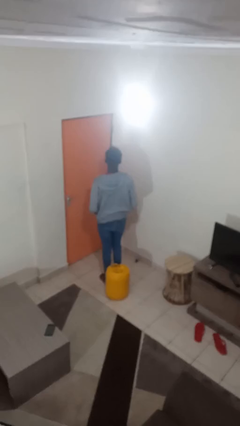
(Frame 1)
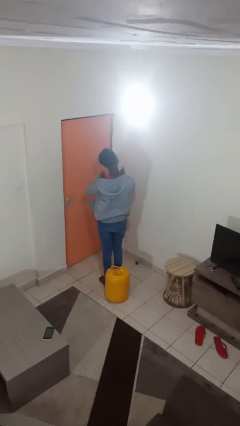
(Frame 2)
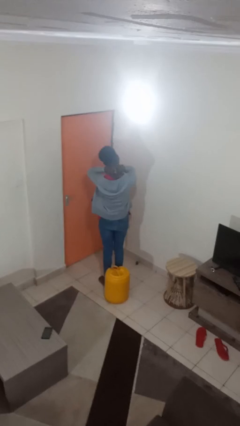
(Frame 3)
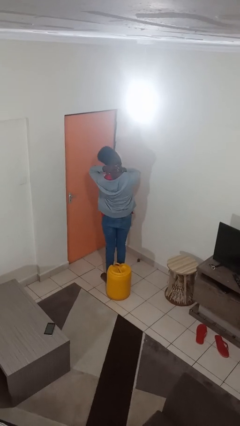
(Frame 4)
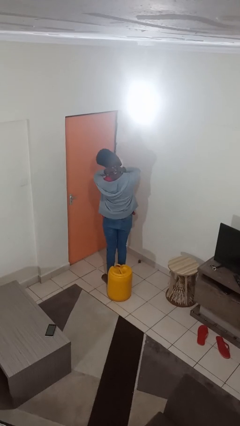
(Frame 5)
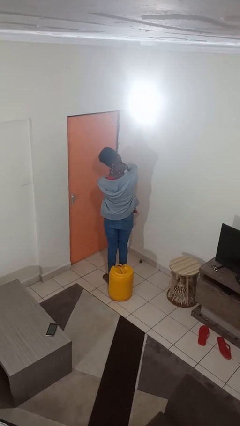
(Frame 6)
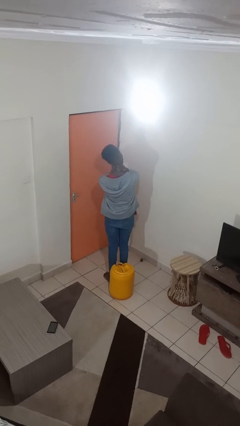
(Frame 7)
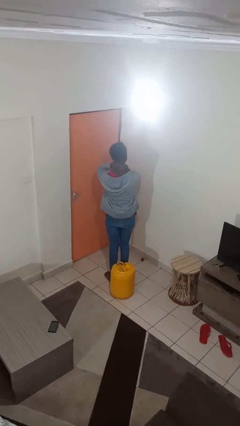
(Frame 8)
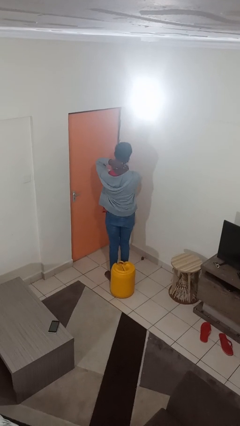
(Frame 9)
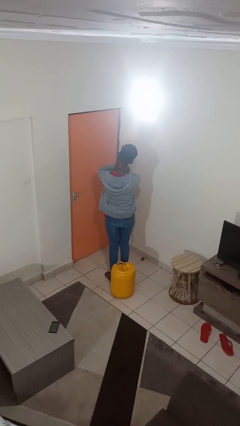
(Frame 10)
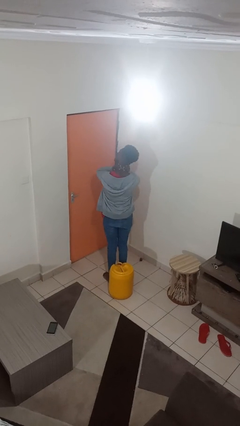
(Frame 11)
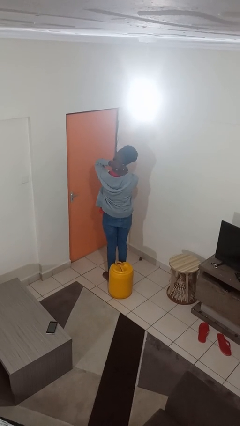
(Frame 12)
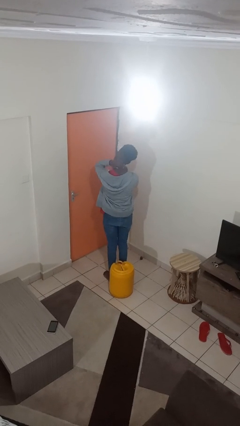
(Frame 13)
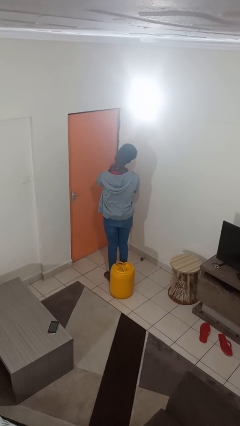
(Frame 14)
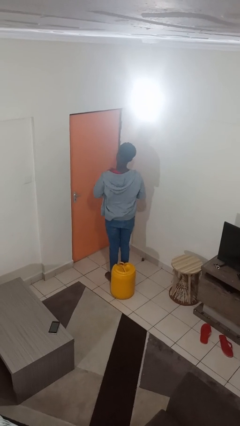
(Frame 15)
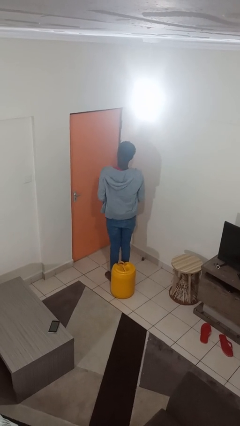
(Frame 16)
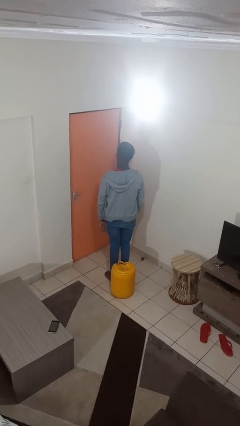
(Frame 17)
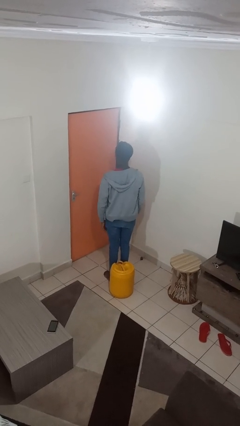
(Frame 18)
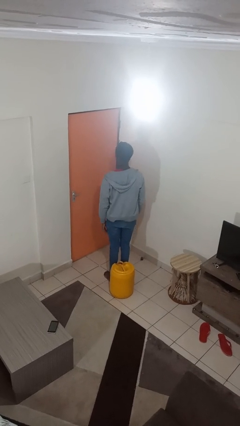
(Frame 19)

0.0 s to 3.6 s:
person rubs neck

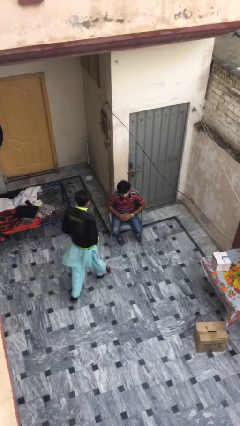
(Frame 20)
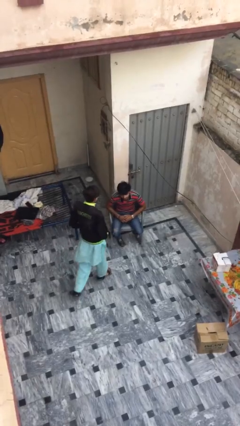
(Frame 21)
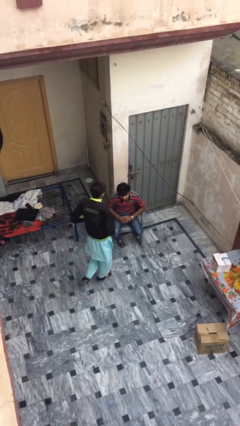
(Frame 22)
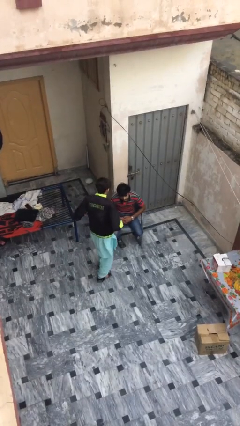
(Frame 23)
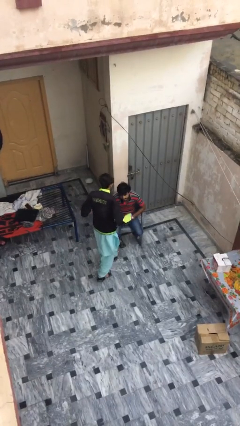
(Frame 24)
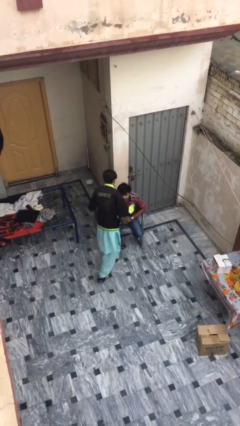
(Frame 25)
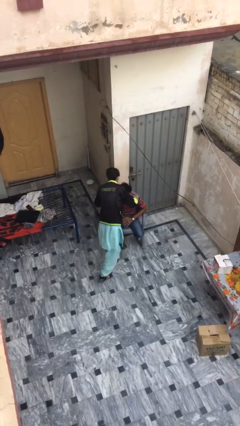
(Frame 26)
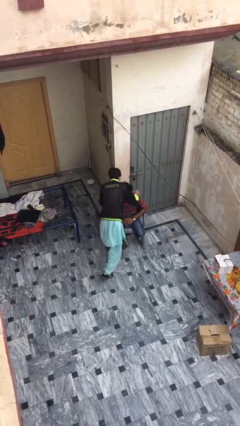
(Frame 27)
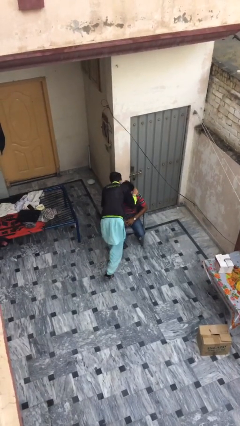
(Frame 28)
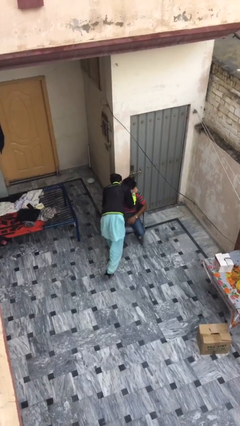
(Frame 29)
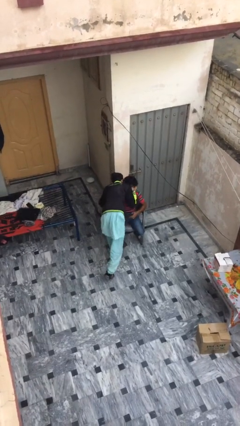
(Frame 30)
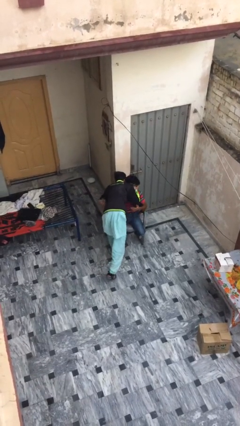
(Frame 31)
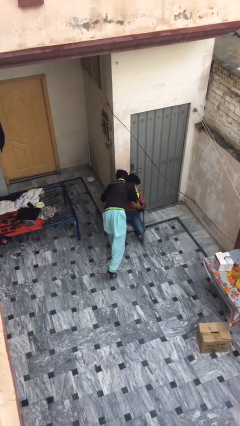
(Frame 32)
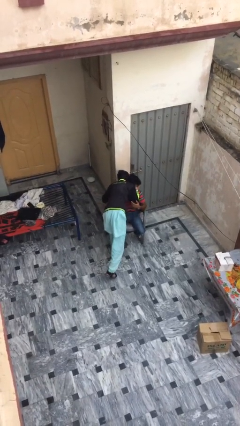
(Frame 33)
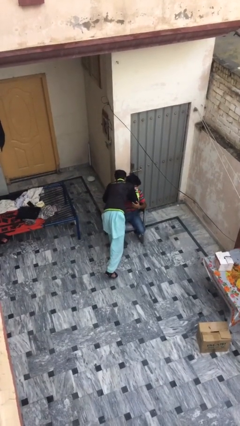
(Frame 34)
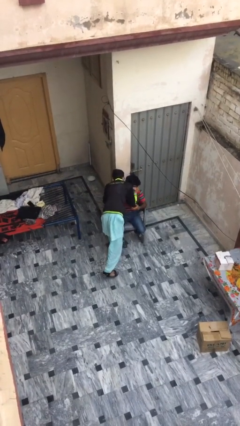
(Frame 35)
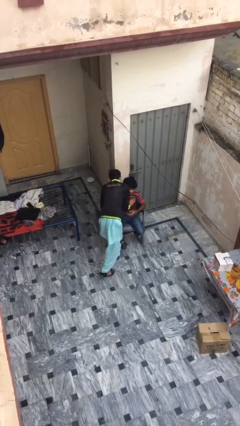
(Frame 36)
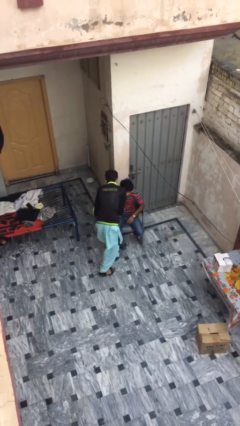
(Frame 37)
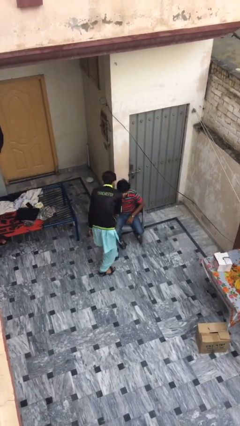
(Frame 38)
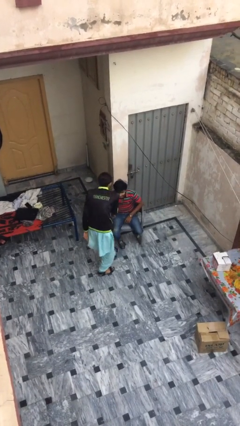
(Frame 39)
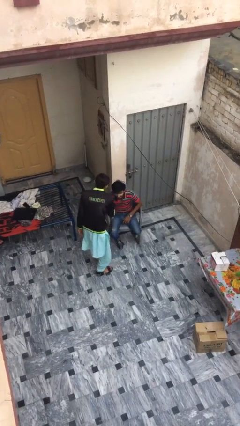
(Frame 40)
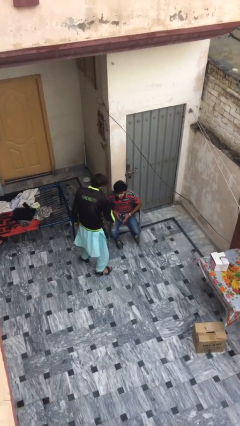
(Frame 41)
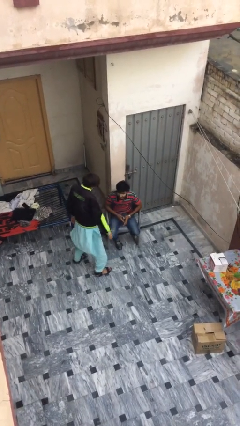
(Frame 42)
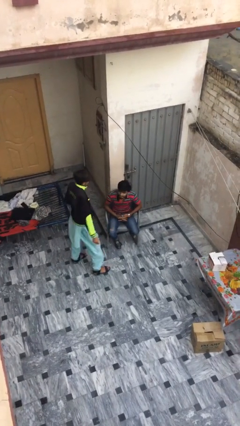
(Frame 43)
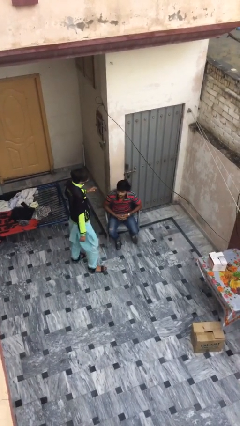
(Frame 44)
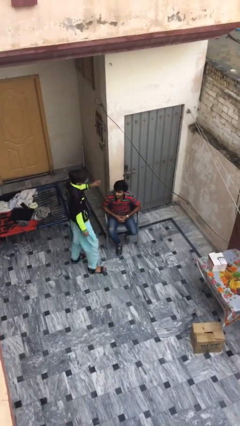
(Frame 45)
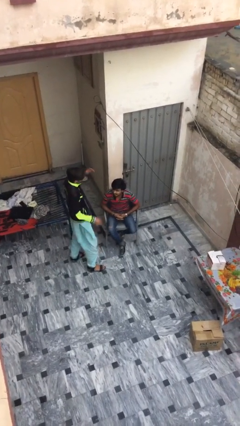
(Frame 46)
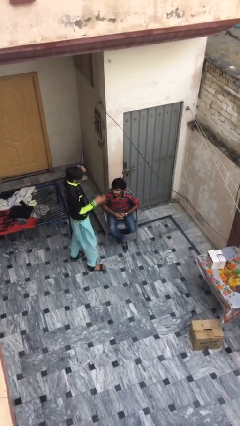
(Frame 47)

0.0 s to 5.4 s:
person embraces person

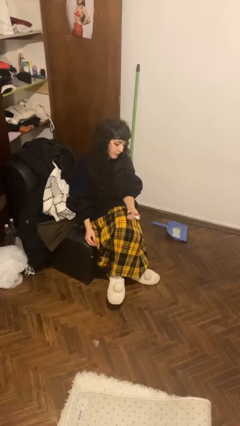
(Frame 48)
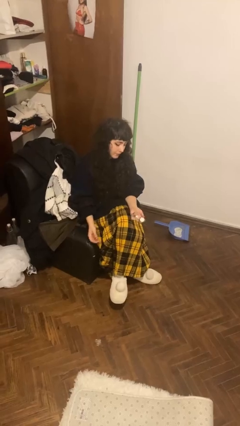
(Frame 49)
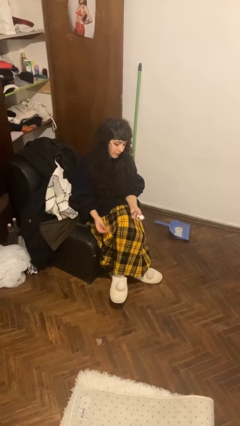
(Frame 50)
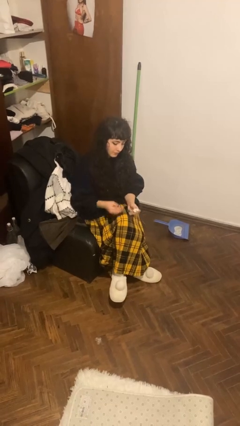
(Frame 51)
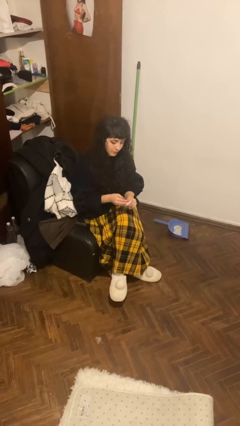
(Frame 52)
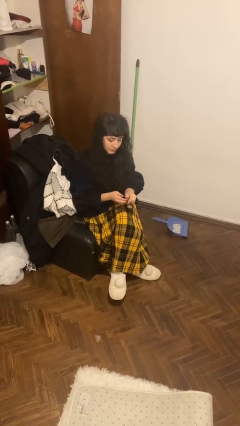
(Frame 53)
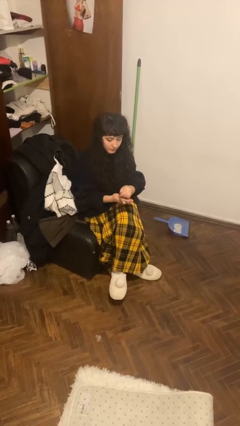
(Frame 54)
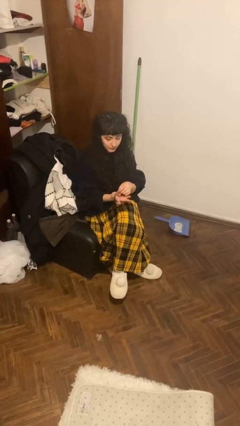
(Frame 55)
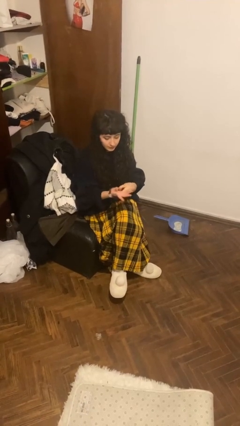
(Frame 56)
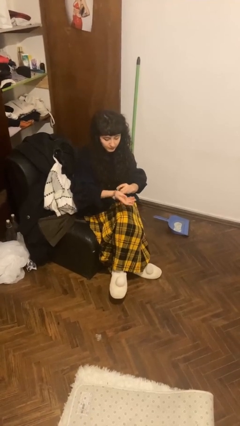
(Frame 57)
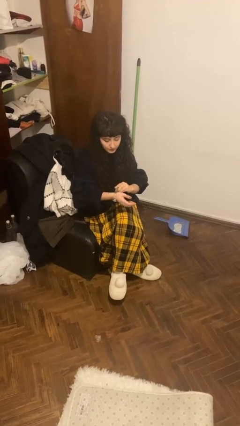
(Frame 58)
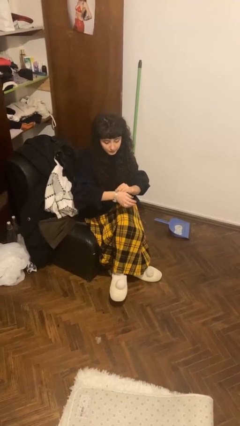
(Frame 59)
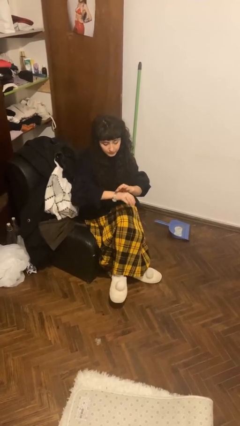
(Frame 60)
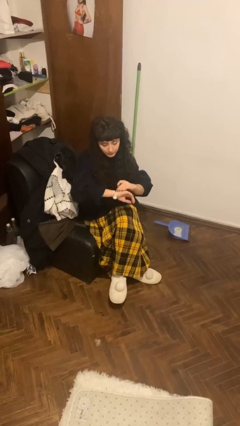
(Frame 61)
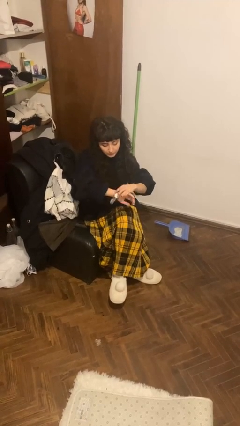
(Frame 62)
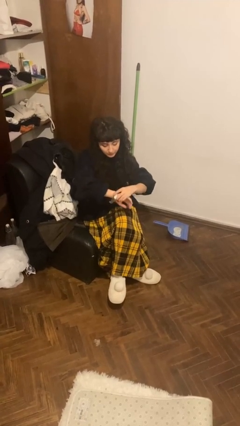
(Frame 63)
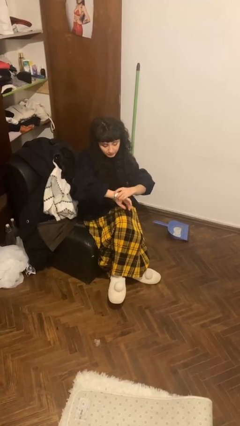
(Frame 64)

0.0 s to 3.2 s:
person puts on wristwatch

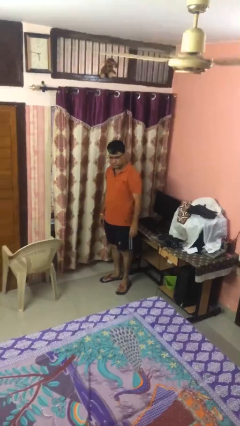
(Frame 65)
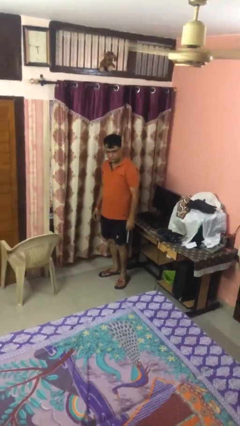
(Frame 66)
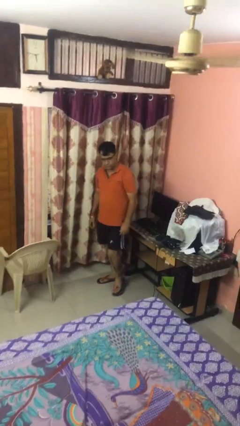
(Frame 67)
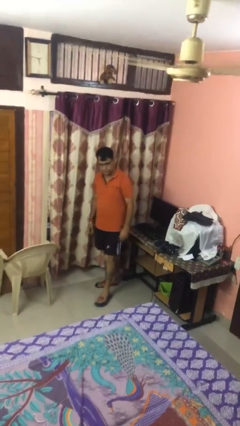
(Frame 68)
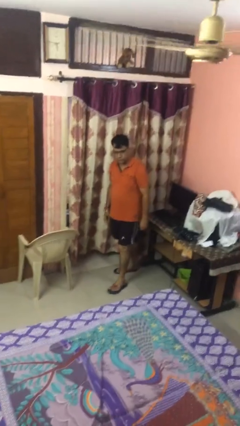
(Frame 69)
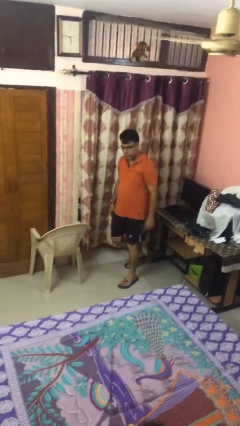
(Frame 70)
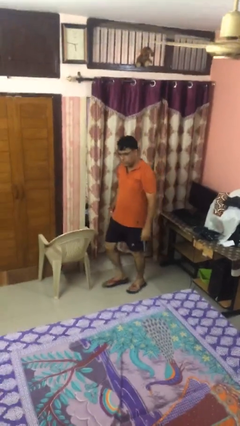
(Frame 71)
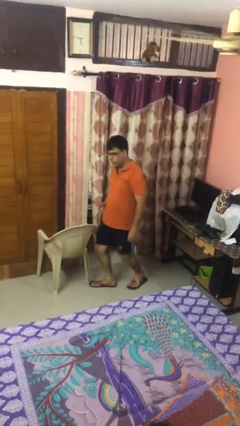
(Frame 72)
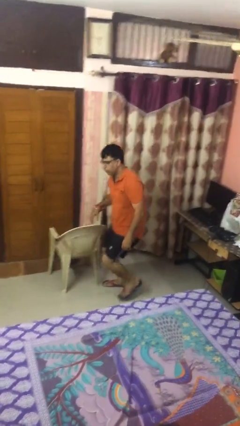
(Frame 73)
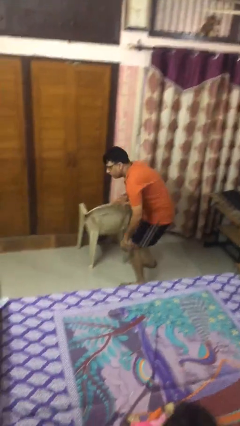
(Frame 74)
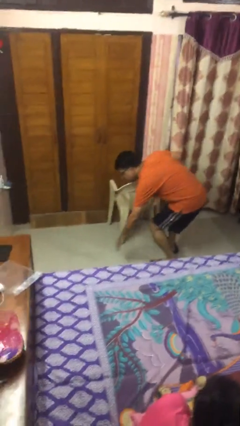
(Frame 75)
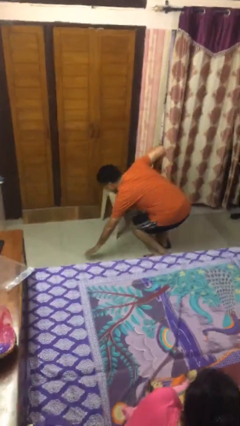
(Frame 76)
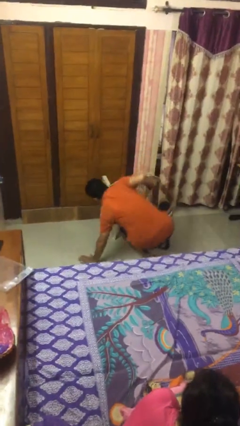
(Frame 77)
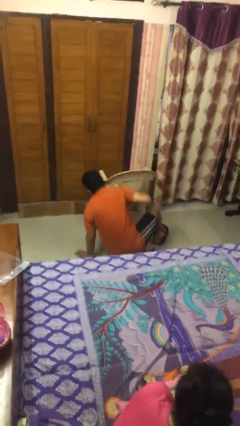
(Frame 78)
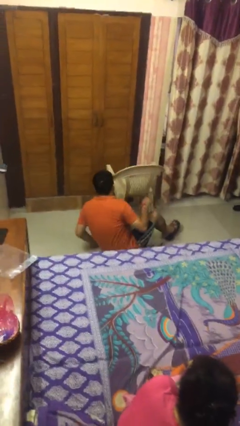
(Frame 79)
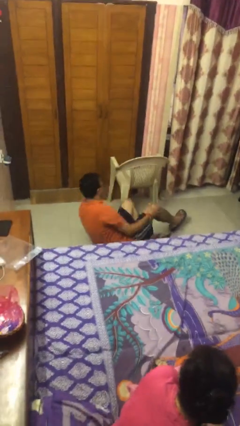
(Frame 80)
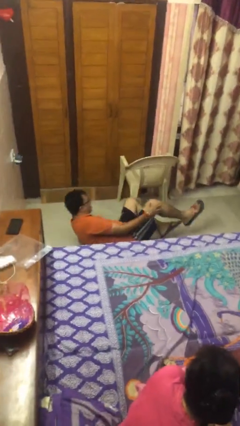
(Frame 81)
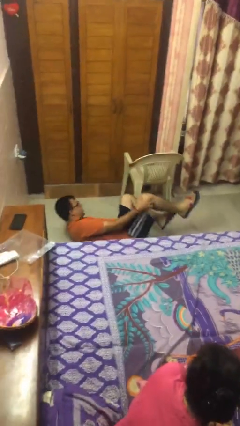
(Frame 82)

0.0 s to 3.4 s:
person trips on object on floor

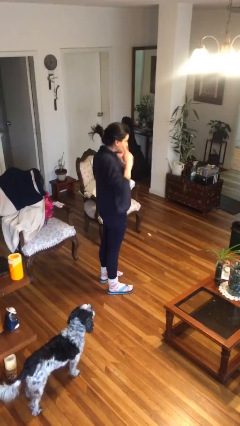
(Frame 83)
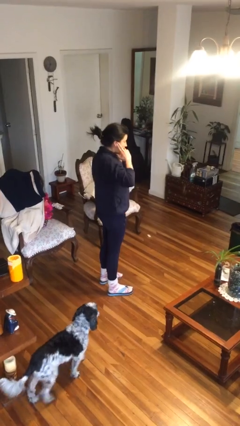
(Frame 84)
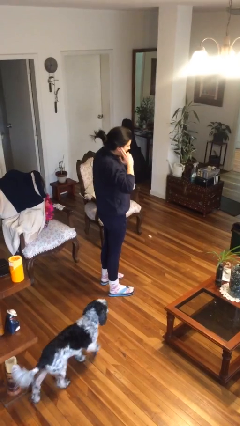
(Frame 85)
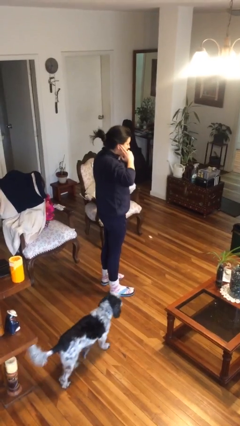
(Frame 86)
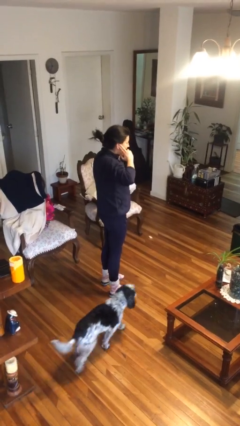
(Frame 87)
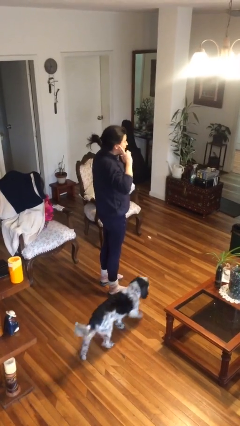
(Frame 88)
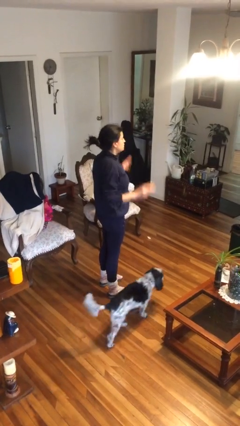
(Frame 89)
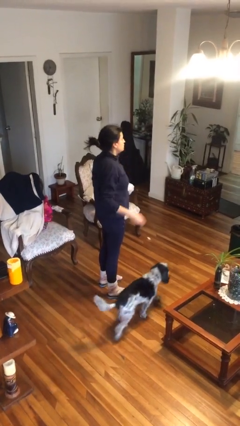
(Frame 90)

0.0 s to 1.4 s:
person puts fingers in ear

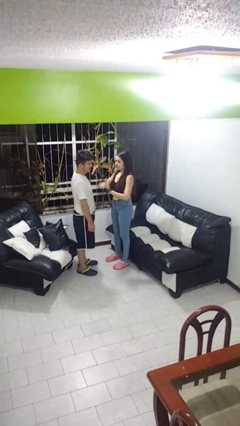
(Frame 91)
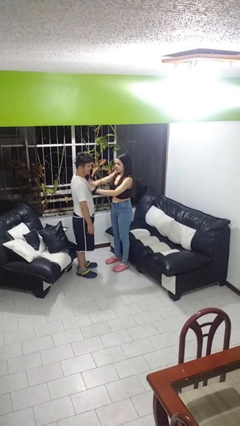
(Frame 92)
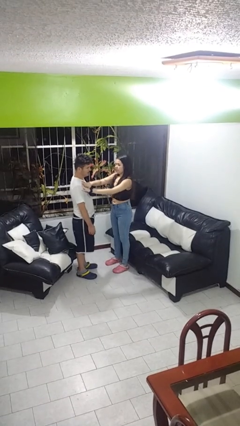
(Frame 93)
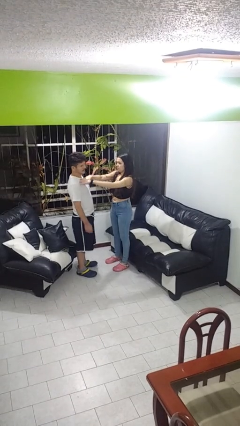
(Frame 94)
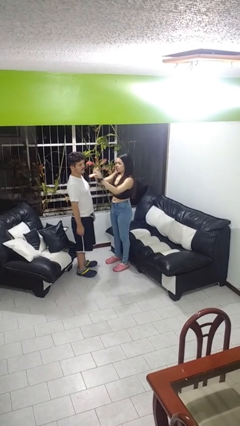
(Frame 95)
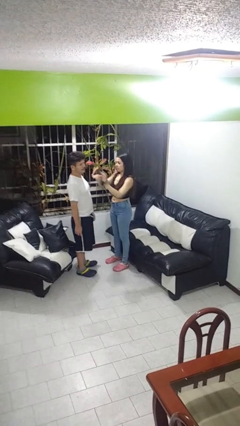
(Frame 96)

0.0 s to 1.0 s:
person shoves person
